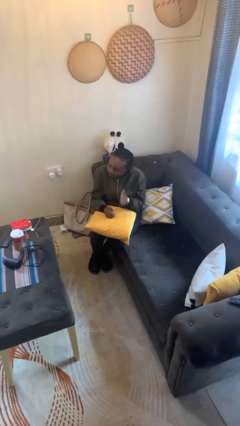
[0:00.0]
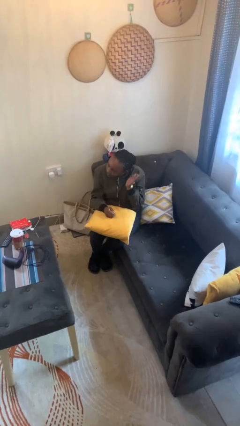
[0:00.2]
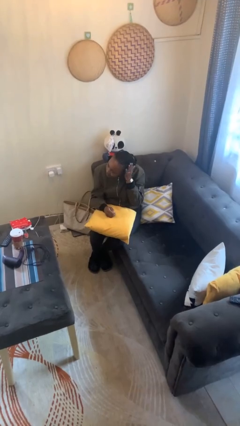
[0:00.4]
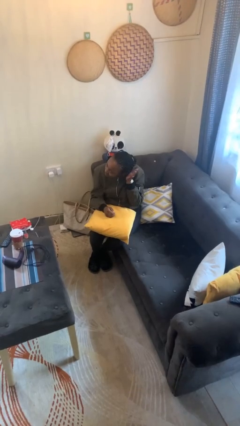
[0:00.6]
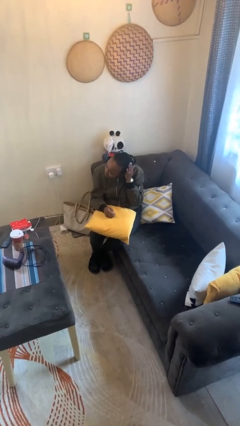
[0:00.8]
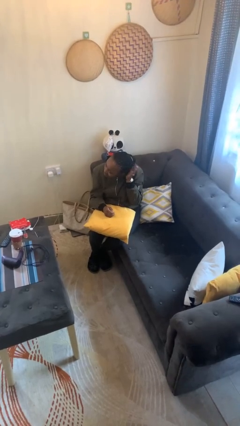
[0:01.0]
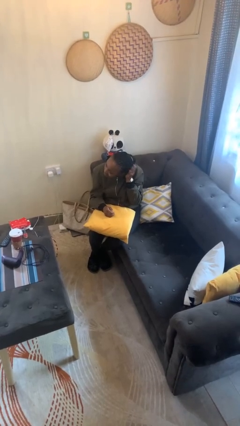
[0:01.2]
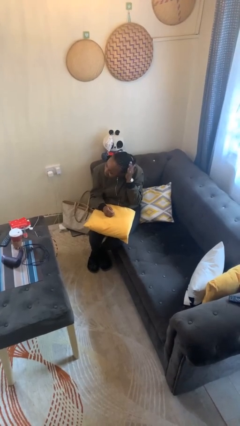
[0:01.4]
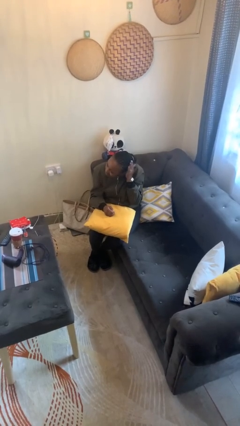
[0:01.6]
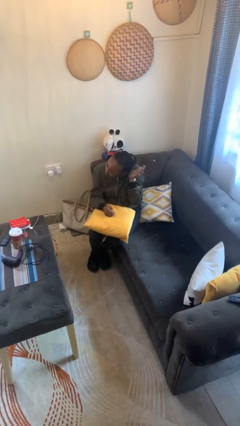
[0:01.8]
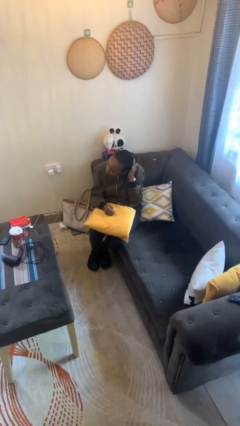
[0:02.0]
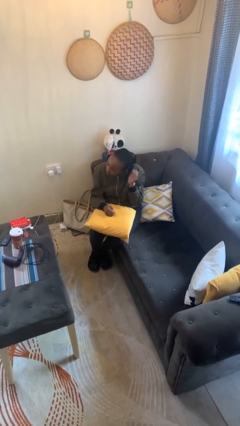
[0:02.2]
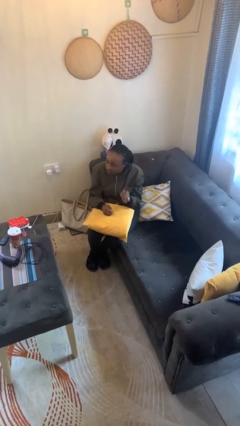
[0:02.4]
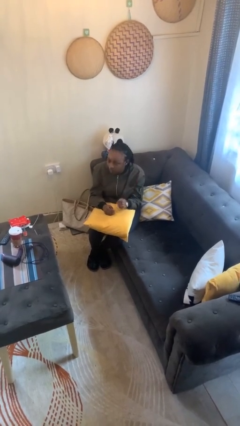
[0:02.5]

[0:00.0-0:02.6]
person pats head

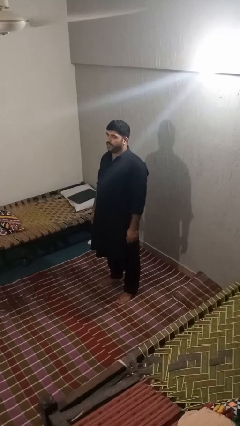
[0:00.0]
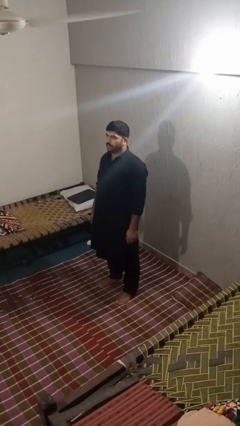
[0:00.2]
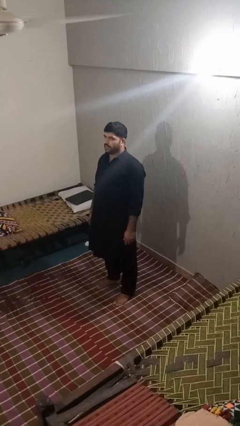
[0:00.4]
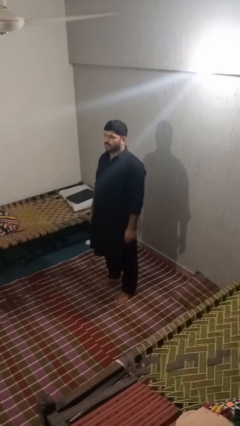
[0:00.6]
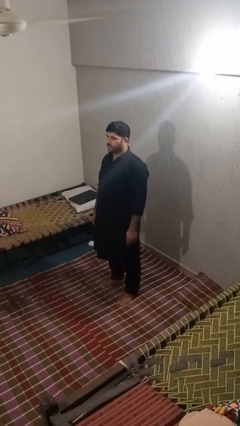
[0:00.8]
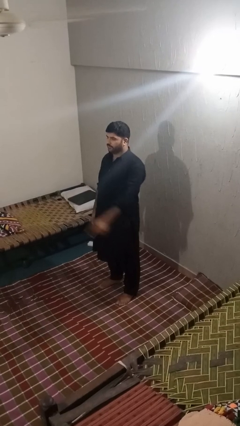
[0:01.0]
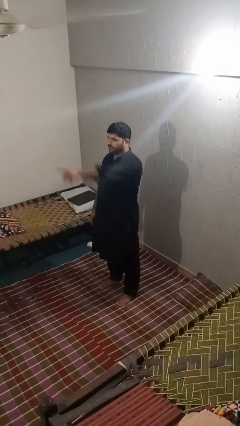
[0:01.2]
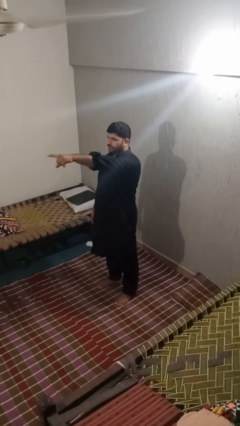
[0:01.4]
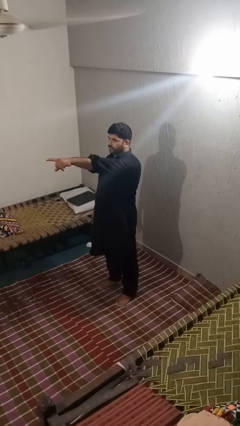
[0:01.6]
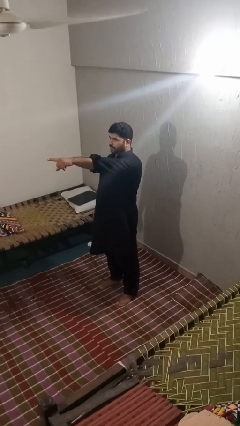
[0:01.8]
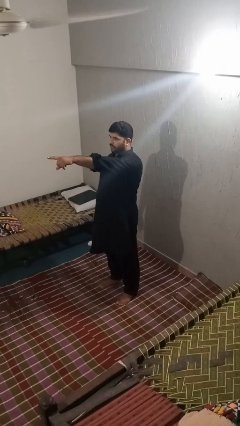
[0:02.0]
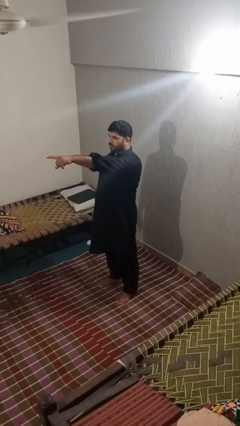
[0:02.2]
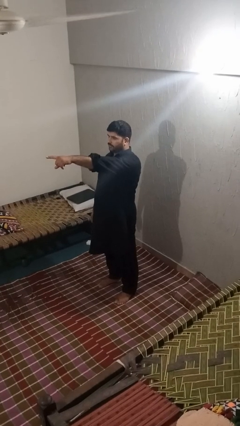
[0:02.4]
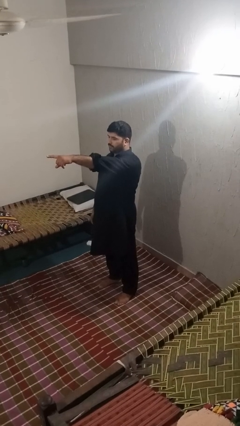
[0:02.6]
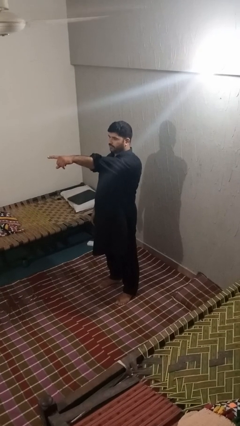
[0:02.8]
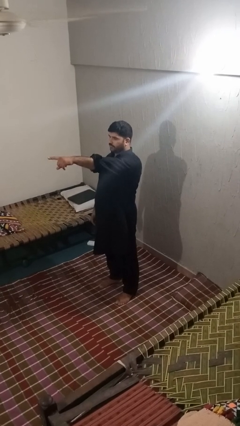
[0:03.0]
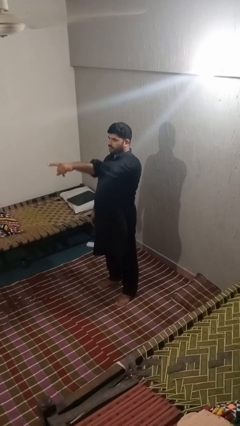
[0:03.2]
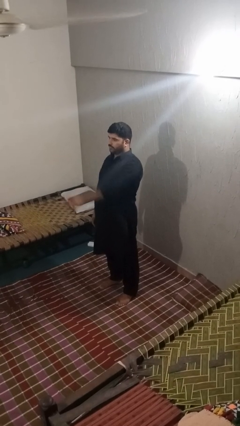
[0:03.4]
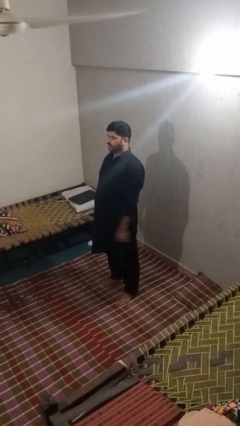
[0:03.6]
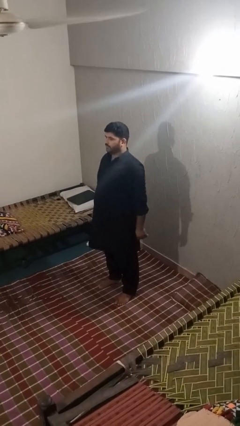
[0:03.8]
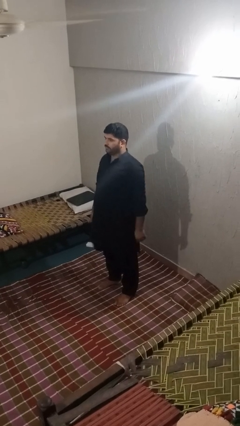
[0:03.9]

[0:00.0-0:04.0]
person points at person

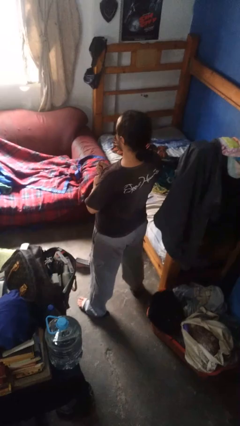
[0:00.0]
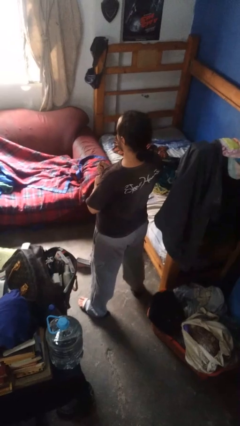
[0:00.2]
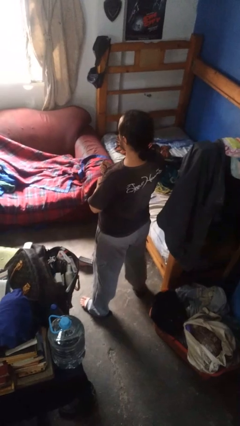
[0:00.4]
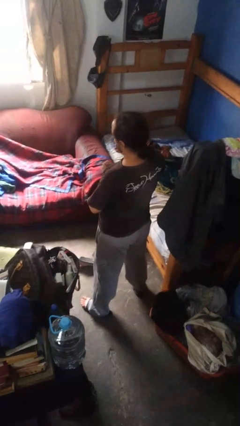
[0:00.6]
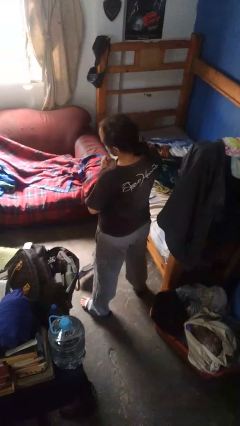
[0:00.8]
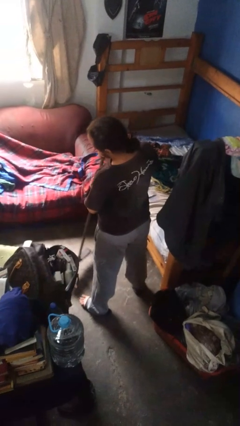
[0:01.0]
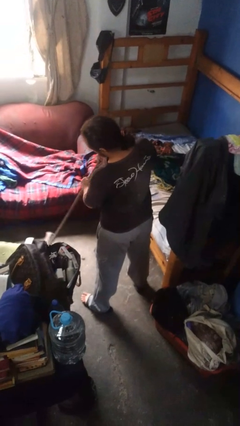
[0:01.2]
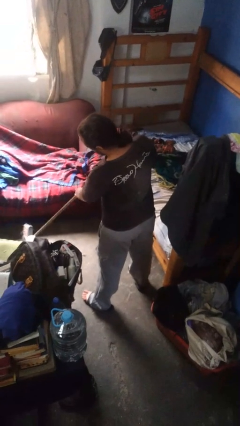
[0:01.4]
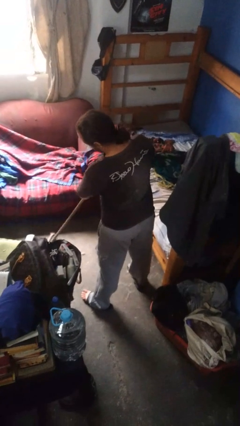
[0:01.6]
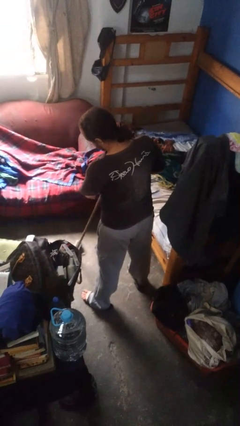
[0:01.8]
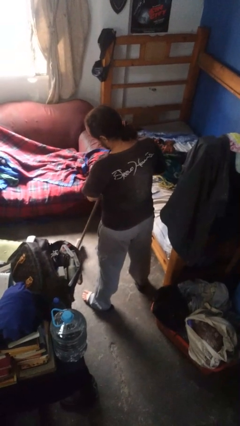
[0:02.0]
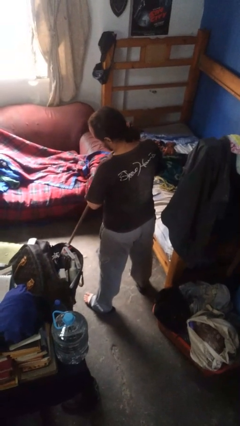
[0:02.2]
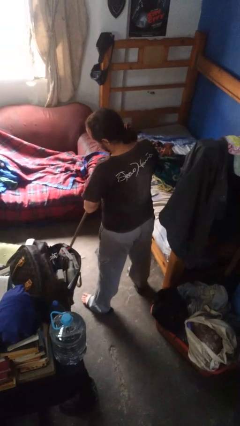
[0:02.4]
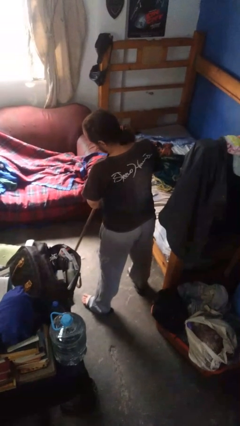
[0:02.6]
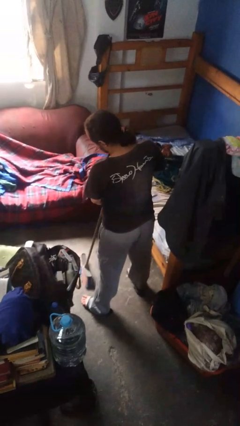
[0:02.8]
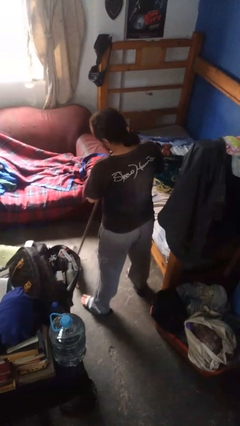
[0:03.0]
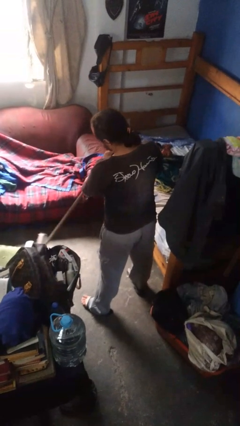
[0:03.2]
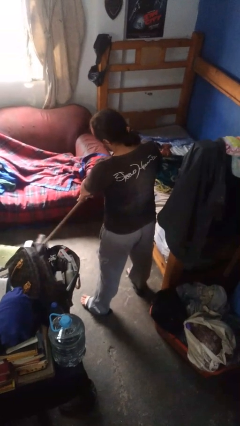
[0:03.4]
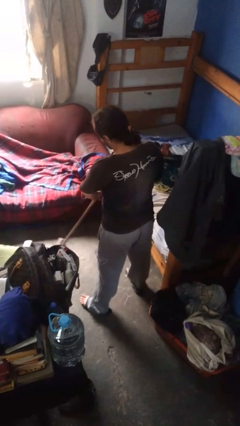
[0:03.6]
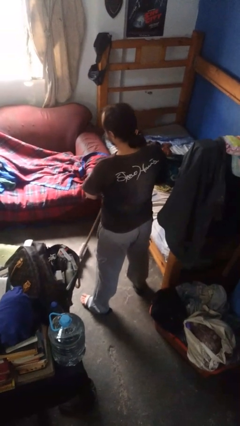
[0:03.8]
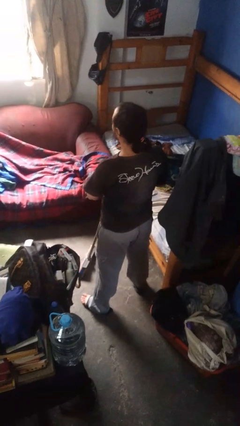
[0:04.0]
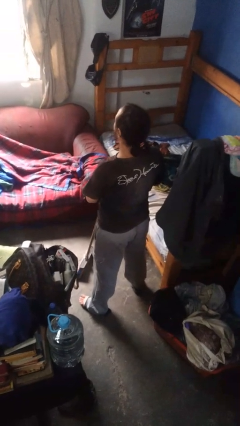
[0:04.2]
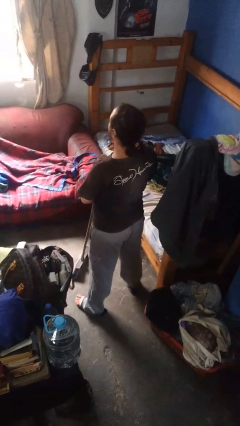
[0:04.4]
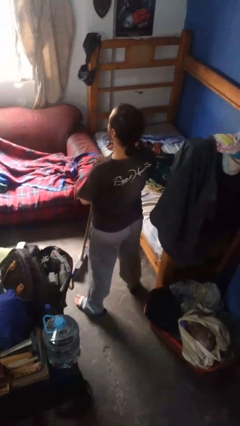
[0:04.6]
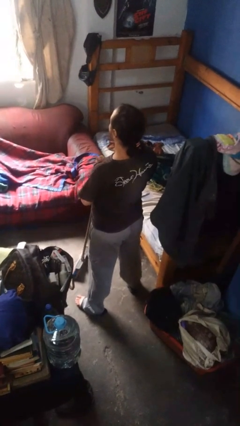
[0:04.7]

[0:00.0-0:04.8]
person sweeps floor

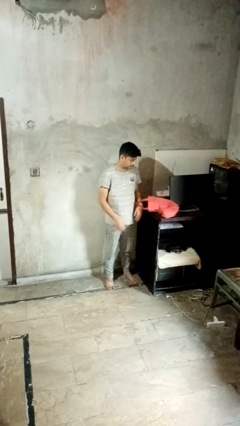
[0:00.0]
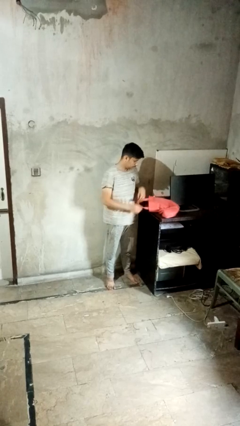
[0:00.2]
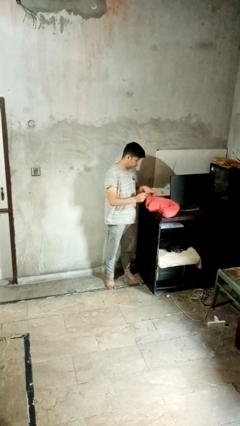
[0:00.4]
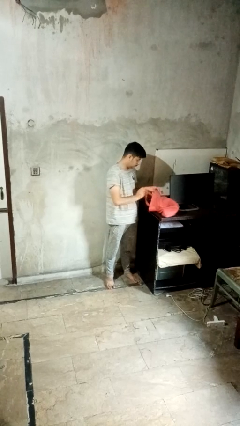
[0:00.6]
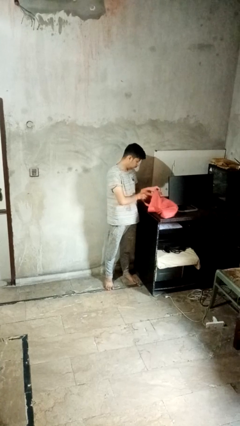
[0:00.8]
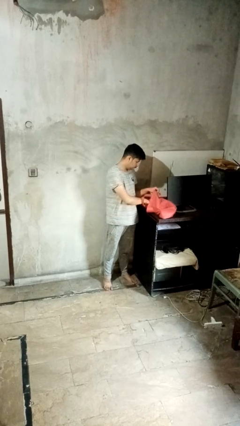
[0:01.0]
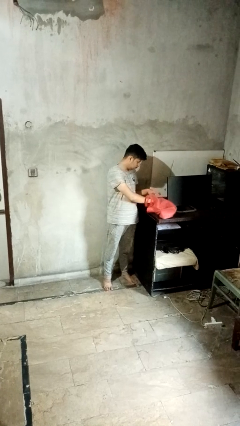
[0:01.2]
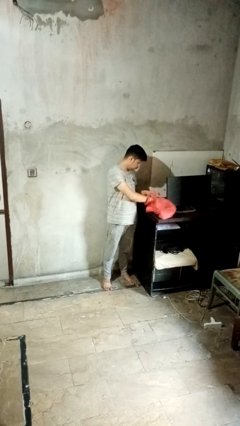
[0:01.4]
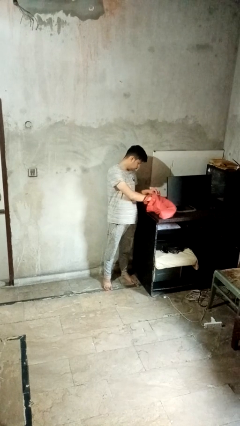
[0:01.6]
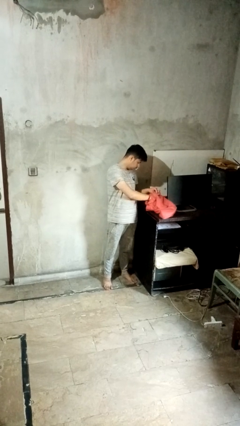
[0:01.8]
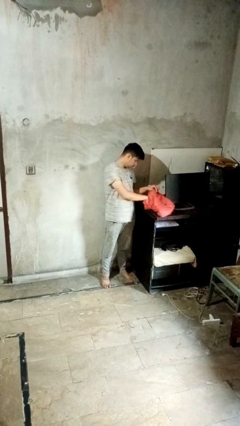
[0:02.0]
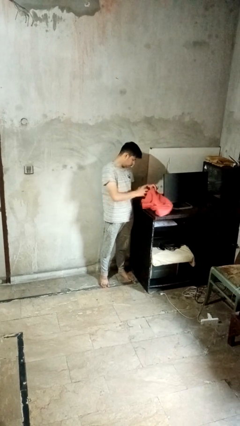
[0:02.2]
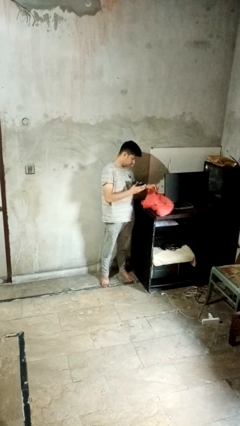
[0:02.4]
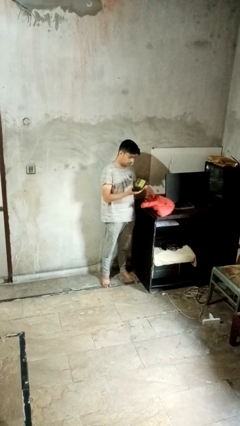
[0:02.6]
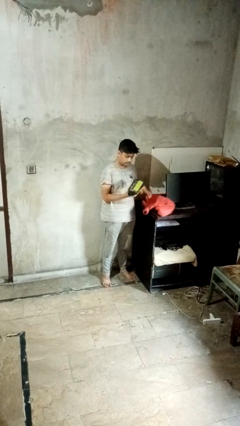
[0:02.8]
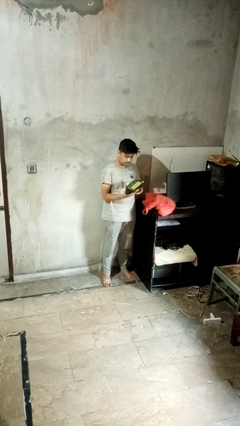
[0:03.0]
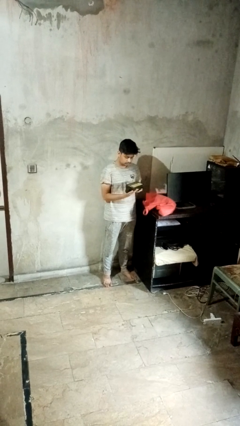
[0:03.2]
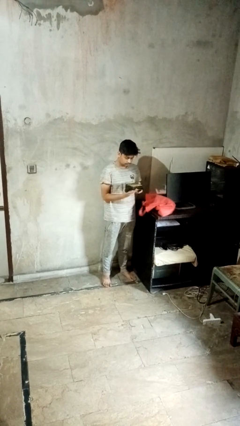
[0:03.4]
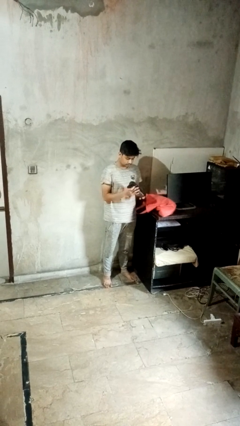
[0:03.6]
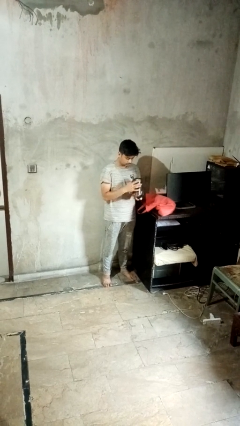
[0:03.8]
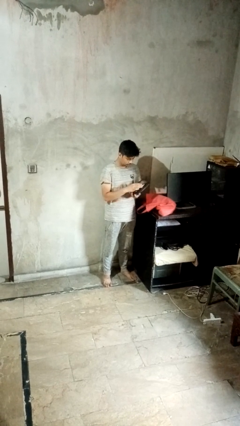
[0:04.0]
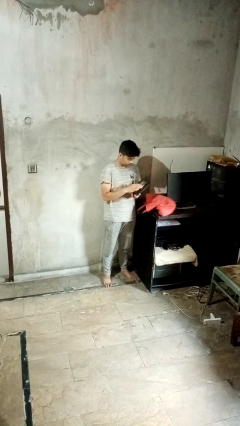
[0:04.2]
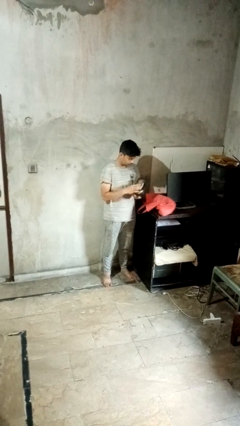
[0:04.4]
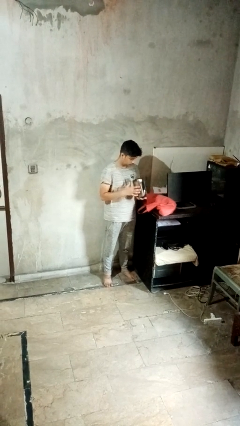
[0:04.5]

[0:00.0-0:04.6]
person takes object from bag

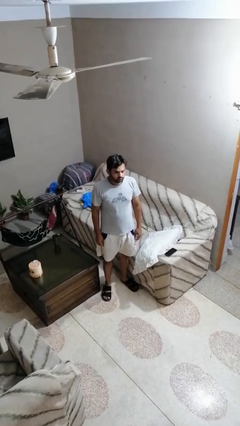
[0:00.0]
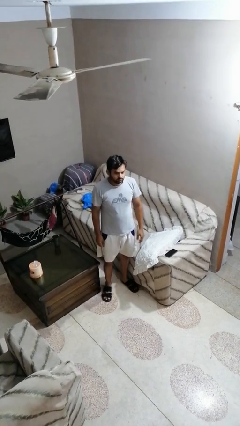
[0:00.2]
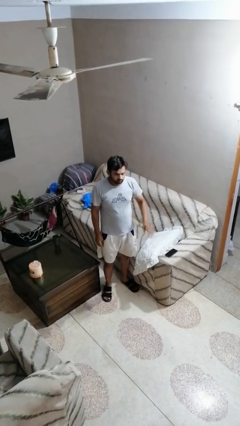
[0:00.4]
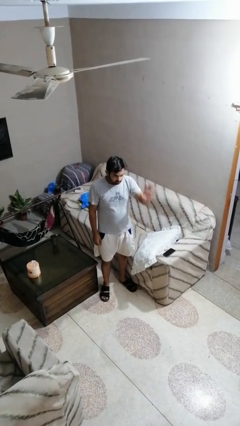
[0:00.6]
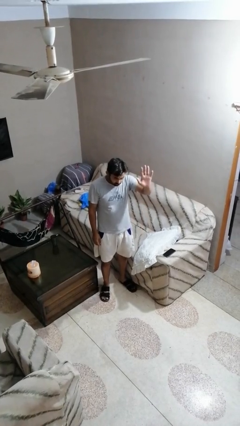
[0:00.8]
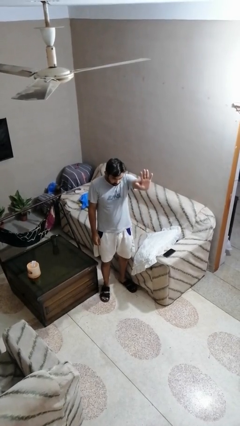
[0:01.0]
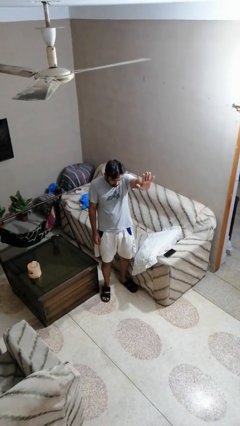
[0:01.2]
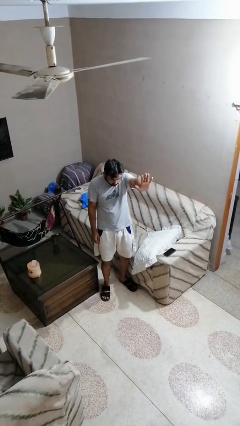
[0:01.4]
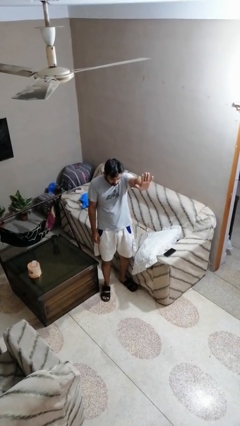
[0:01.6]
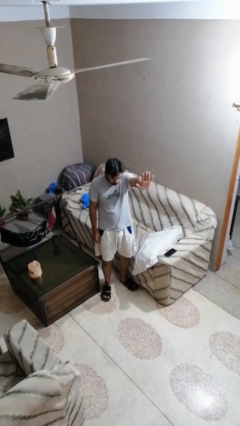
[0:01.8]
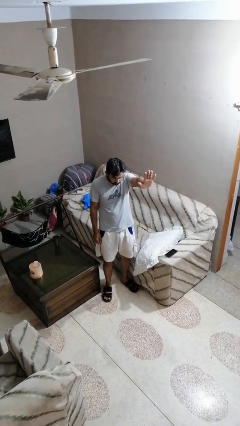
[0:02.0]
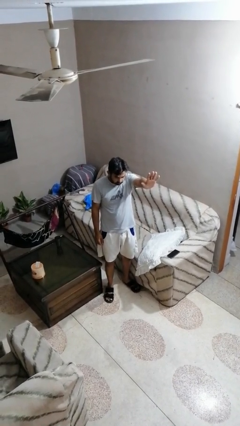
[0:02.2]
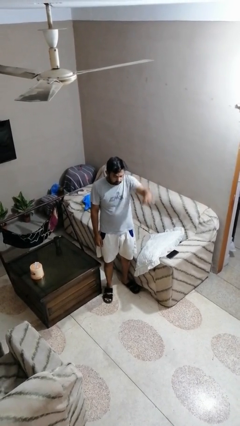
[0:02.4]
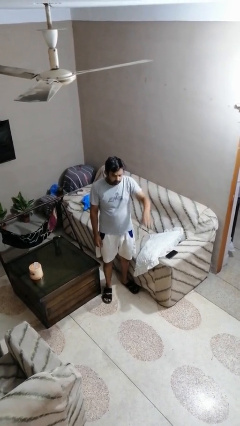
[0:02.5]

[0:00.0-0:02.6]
person gestures stop
